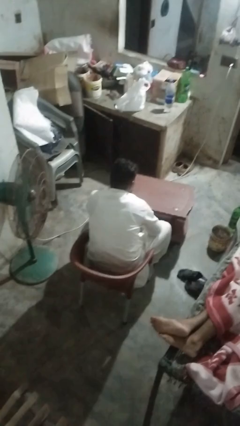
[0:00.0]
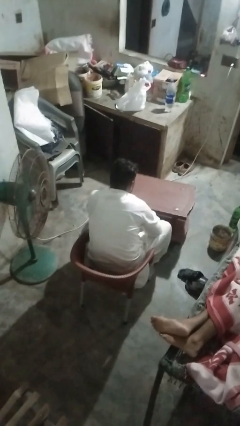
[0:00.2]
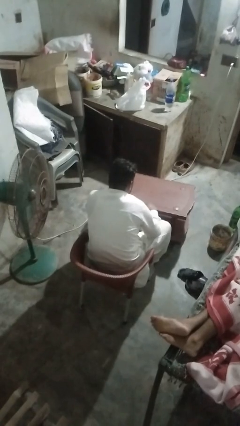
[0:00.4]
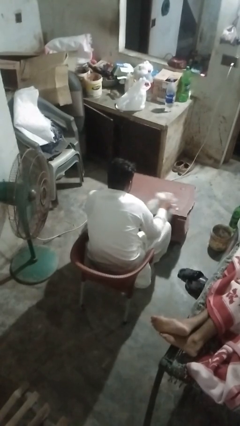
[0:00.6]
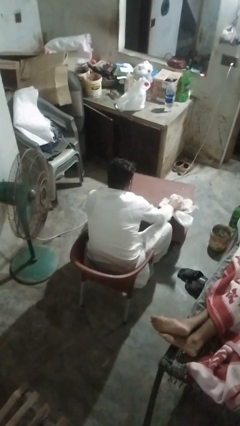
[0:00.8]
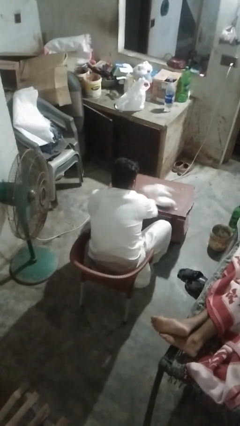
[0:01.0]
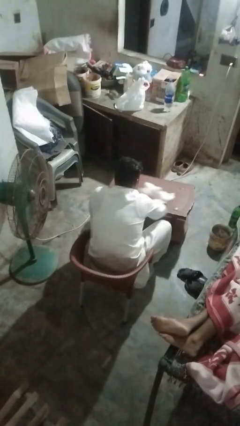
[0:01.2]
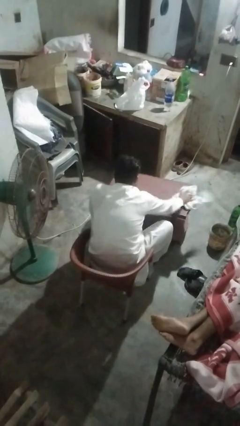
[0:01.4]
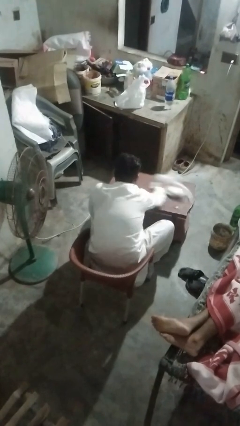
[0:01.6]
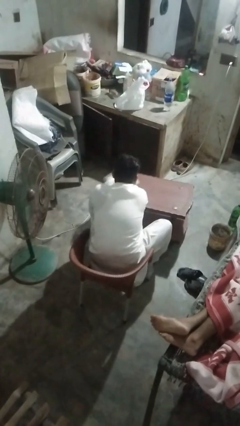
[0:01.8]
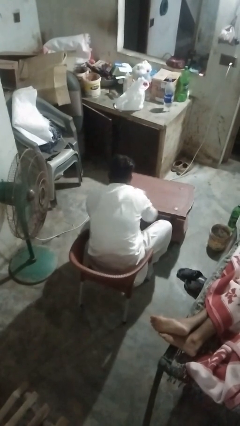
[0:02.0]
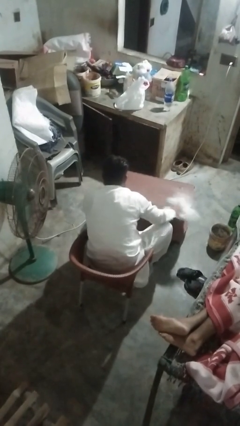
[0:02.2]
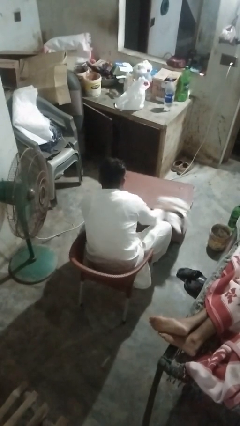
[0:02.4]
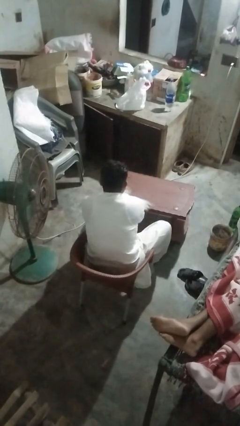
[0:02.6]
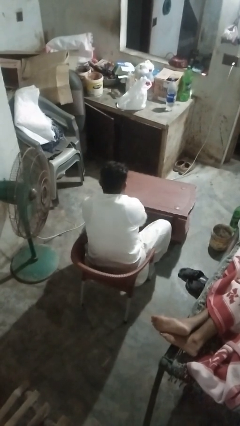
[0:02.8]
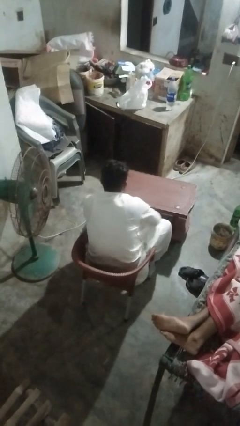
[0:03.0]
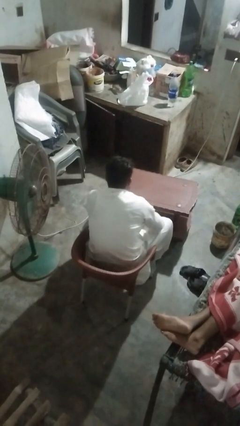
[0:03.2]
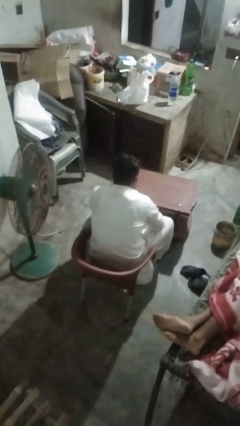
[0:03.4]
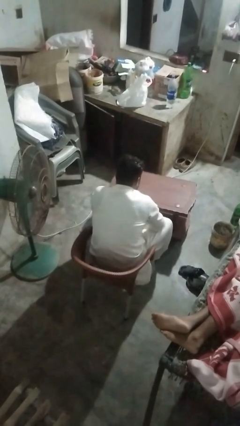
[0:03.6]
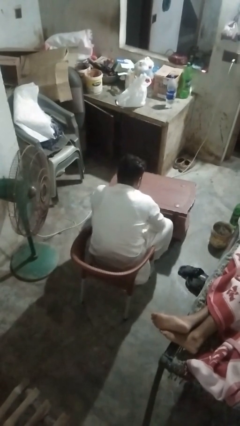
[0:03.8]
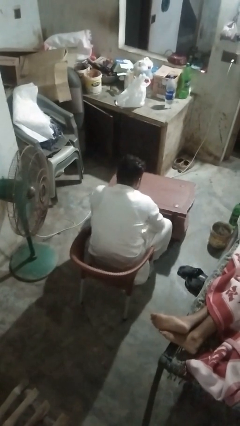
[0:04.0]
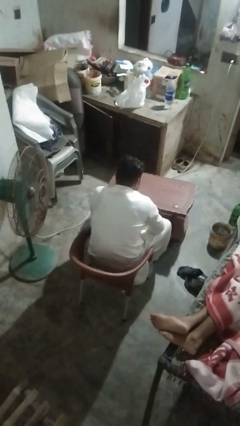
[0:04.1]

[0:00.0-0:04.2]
person cleans table with rag

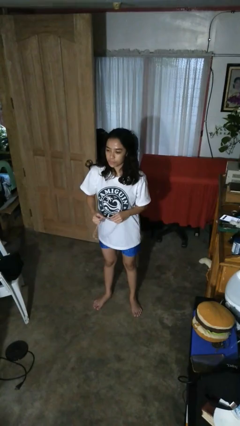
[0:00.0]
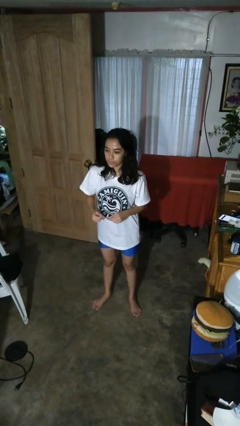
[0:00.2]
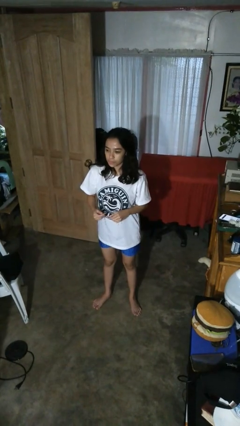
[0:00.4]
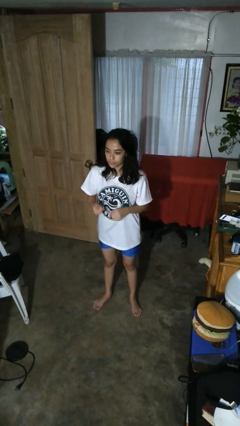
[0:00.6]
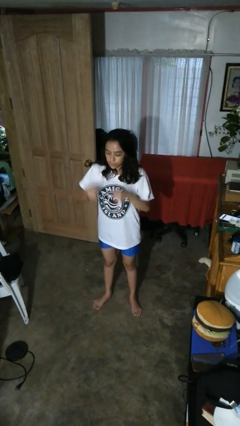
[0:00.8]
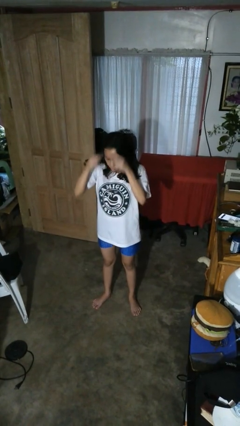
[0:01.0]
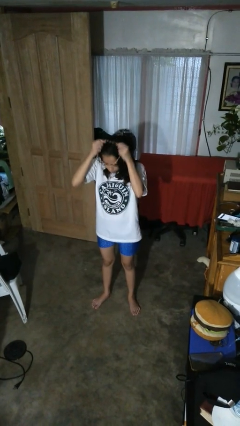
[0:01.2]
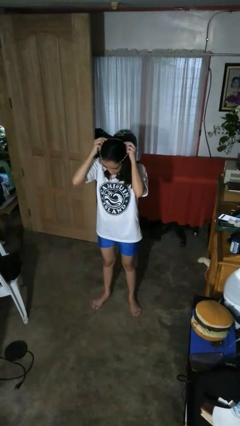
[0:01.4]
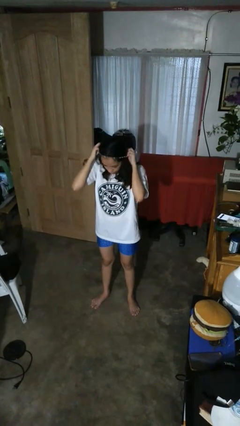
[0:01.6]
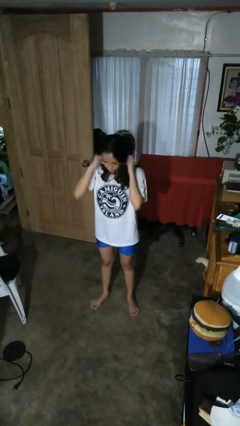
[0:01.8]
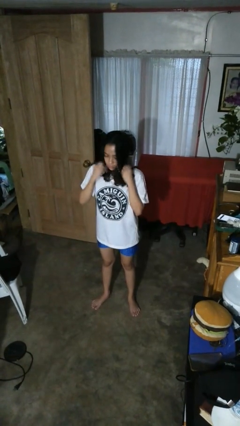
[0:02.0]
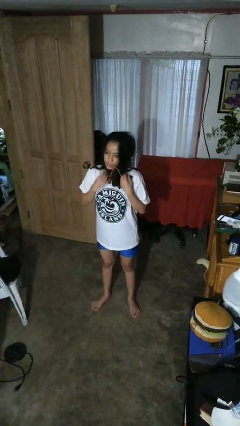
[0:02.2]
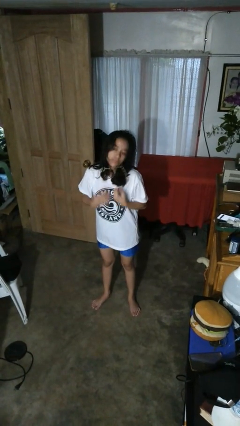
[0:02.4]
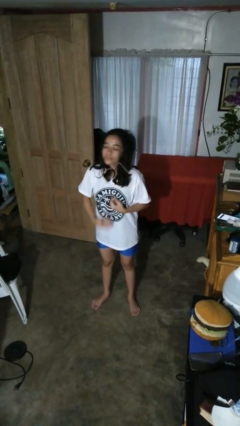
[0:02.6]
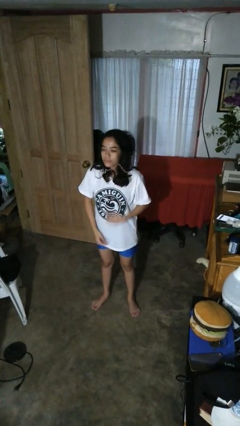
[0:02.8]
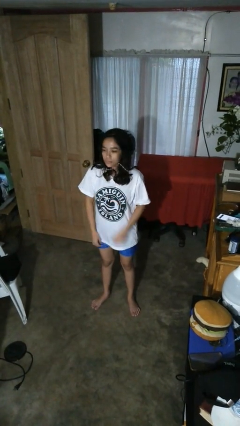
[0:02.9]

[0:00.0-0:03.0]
person puts on necklace

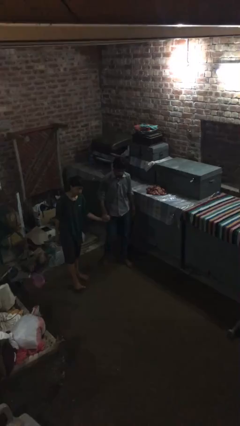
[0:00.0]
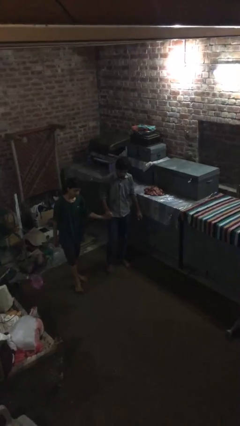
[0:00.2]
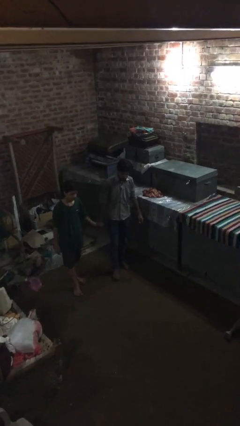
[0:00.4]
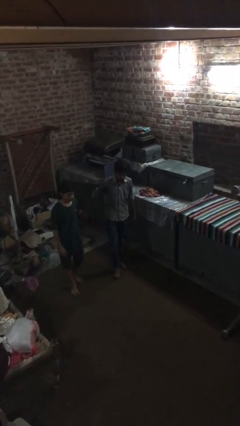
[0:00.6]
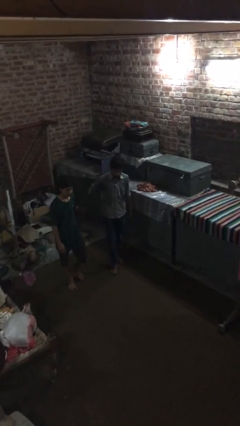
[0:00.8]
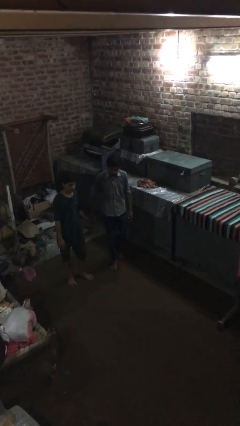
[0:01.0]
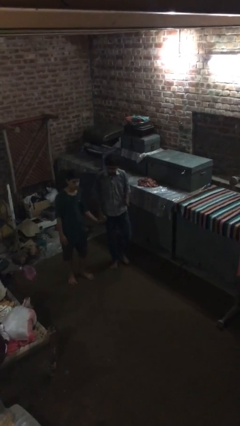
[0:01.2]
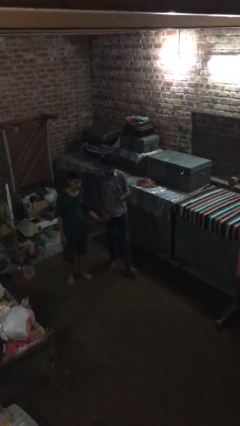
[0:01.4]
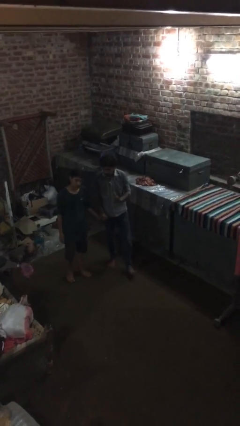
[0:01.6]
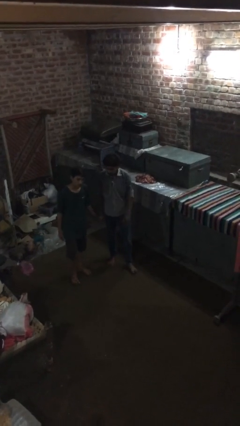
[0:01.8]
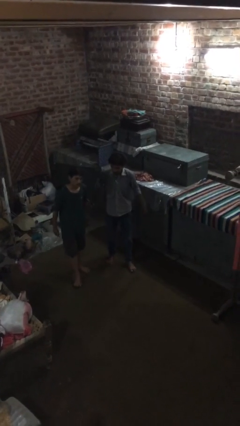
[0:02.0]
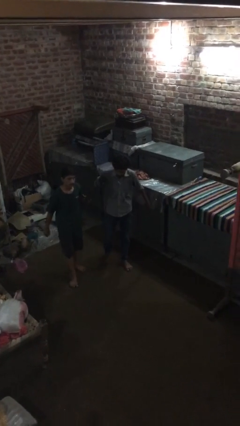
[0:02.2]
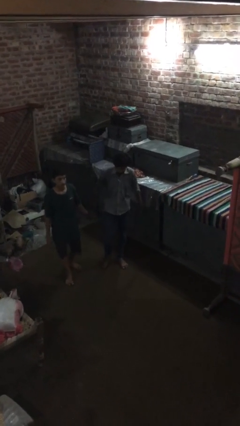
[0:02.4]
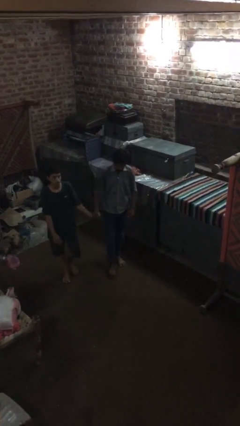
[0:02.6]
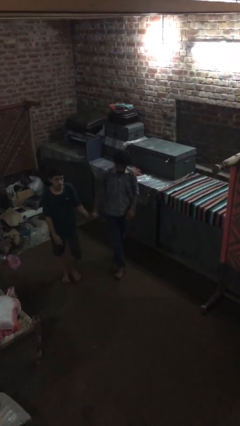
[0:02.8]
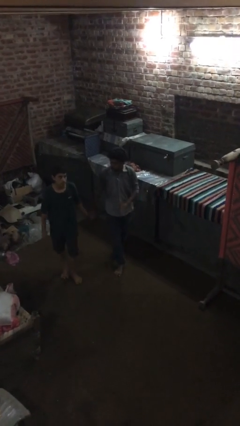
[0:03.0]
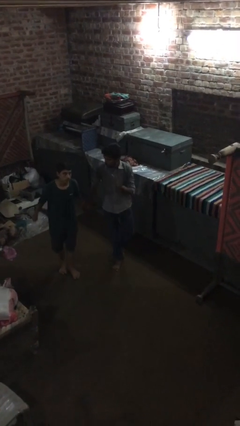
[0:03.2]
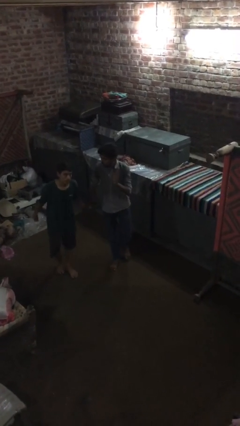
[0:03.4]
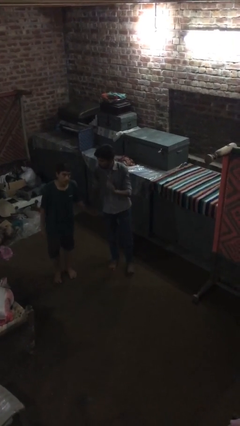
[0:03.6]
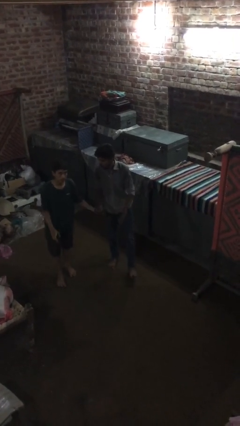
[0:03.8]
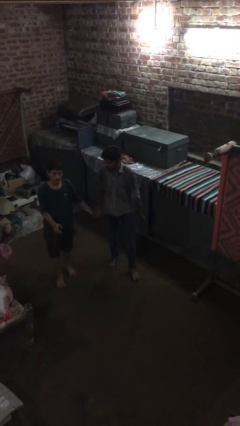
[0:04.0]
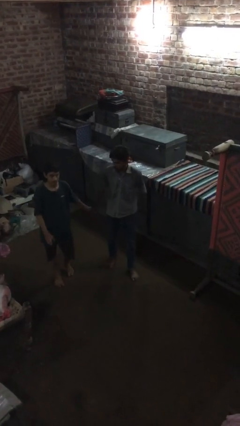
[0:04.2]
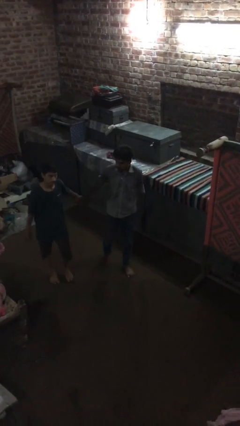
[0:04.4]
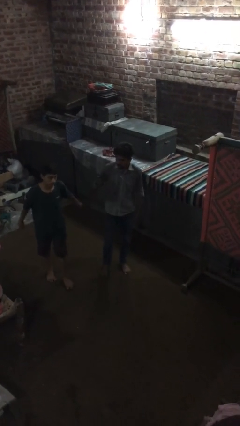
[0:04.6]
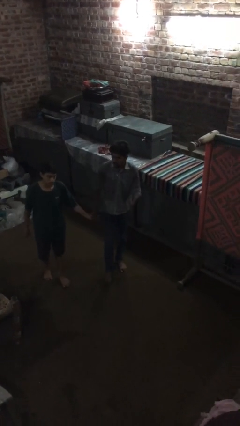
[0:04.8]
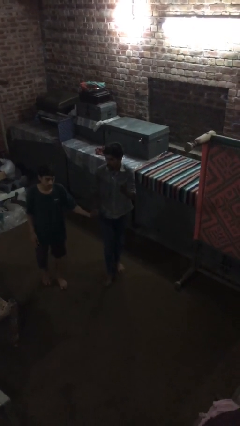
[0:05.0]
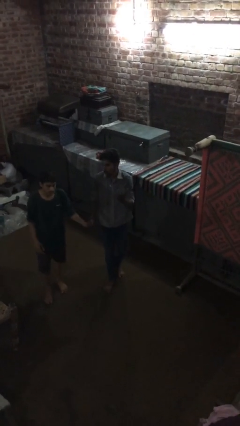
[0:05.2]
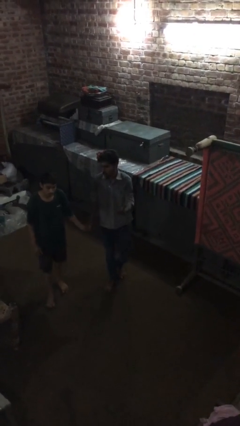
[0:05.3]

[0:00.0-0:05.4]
person holds hand

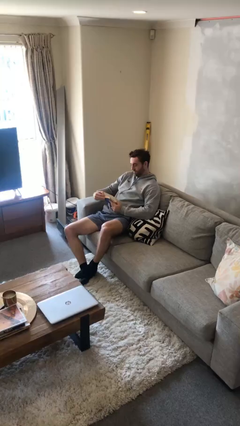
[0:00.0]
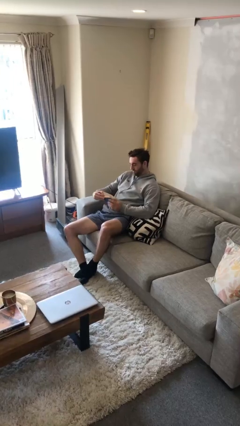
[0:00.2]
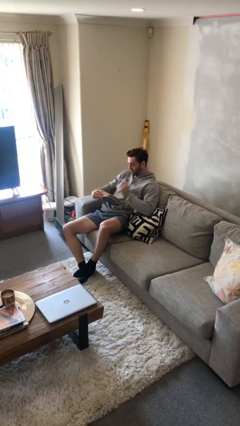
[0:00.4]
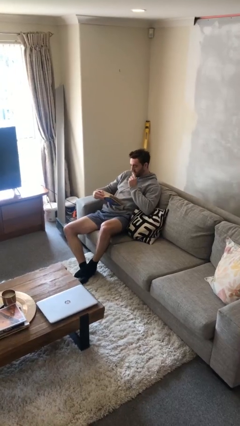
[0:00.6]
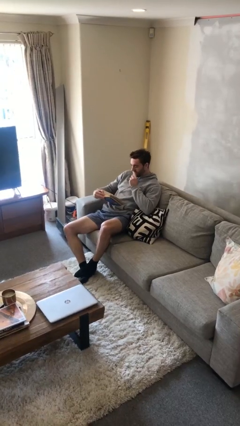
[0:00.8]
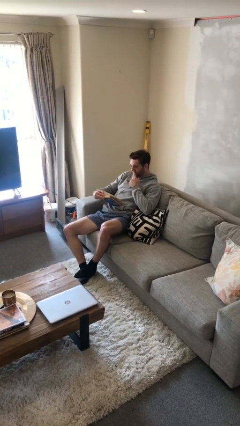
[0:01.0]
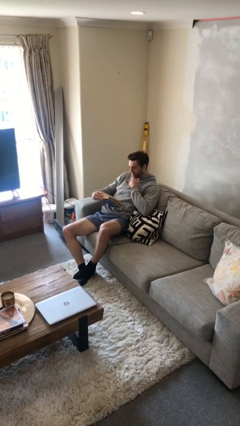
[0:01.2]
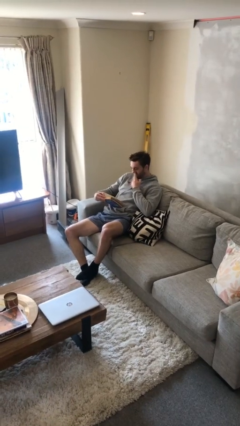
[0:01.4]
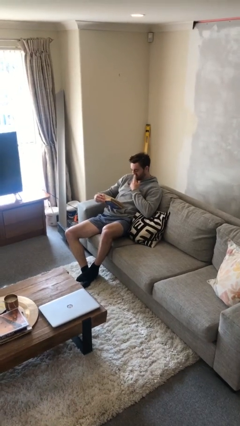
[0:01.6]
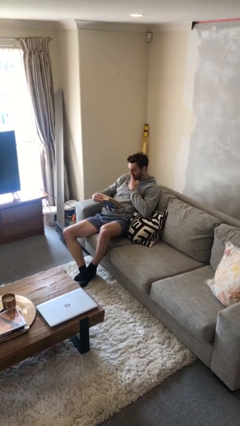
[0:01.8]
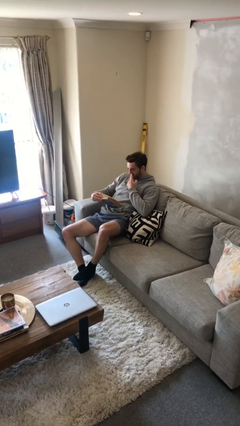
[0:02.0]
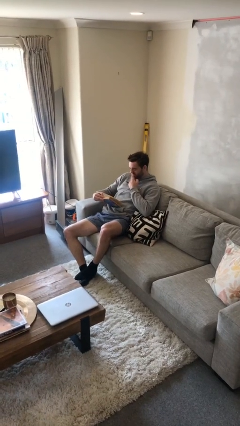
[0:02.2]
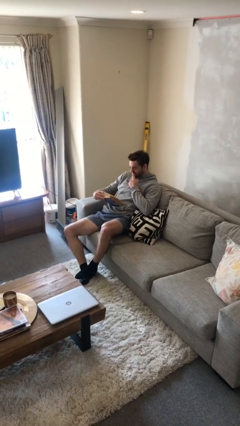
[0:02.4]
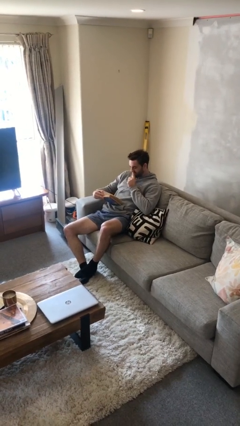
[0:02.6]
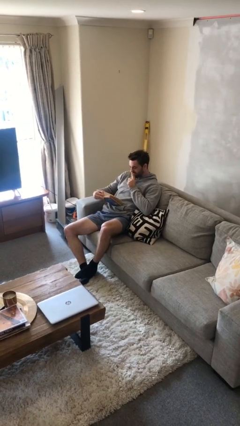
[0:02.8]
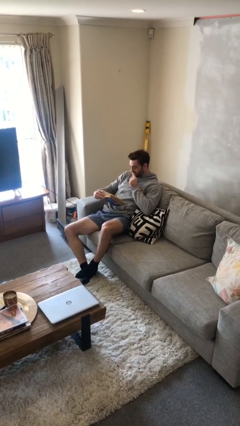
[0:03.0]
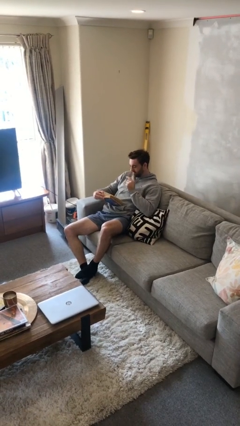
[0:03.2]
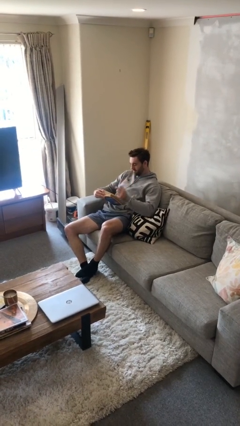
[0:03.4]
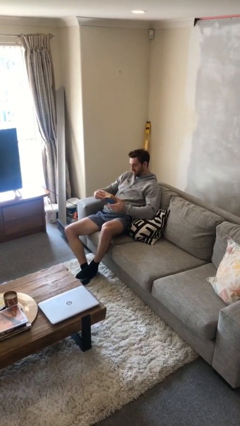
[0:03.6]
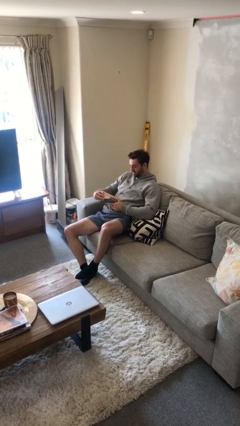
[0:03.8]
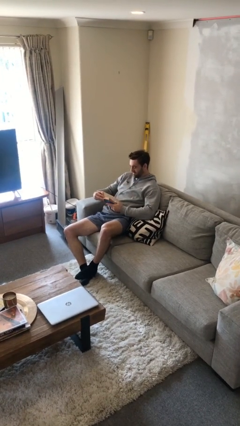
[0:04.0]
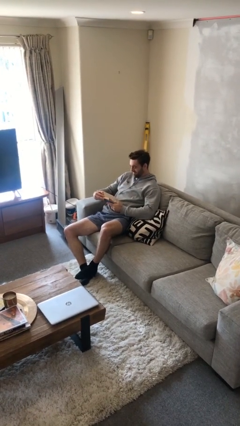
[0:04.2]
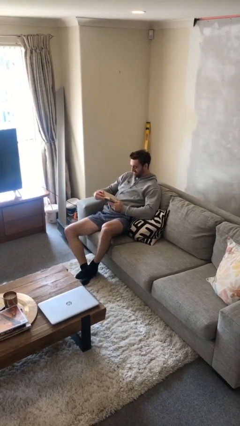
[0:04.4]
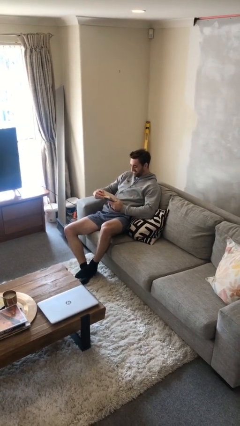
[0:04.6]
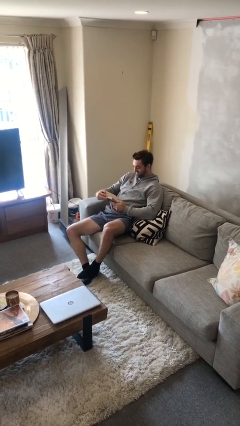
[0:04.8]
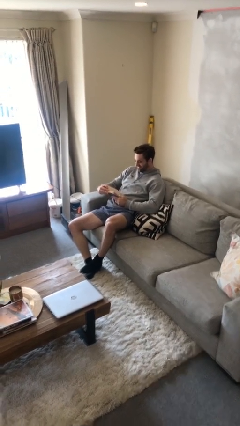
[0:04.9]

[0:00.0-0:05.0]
person reads document
